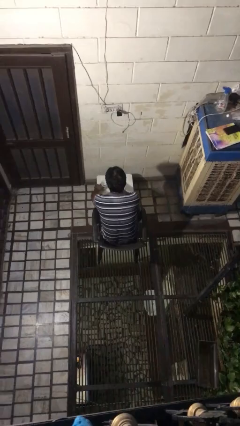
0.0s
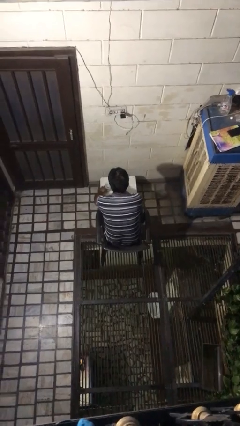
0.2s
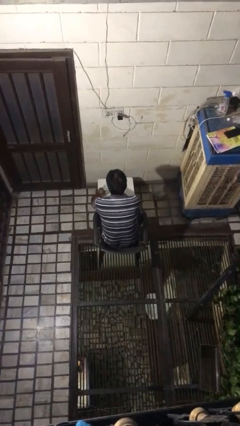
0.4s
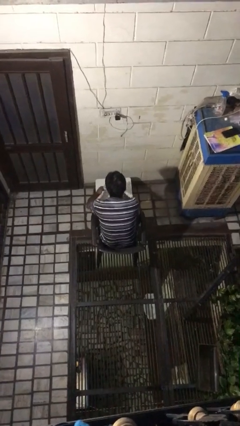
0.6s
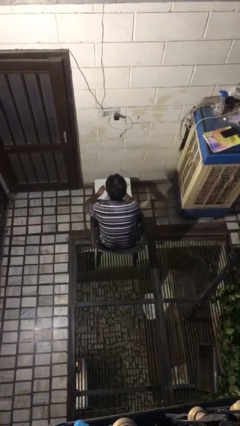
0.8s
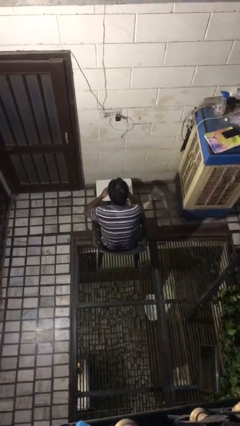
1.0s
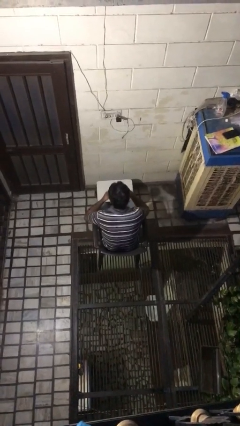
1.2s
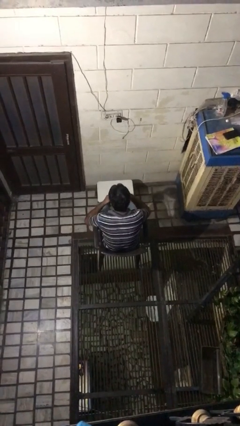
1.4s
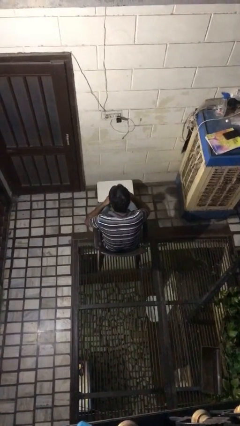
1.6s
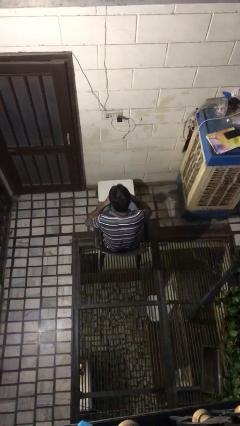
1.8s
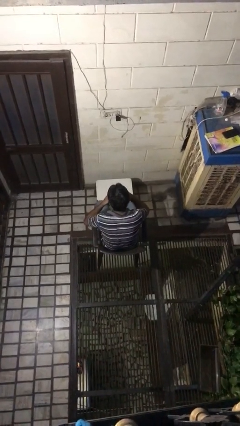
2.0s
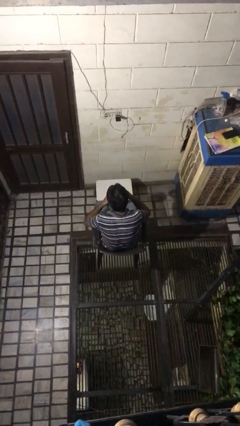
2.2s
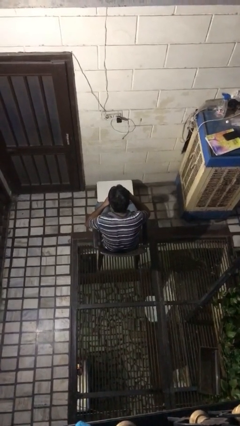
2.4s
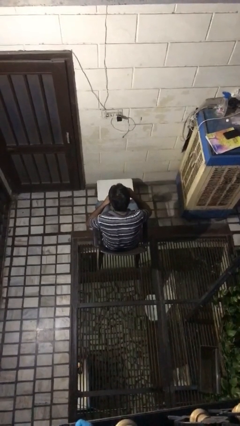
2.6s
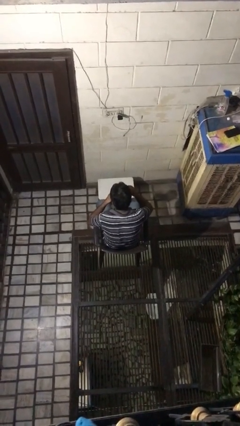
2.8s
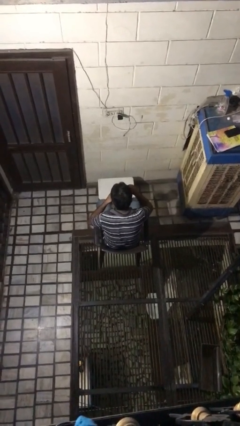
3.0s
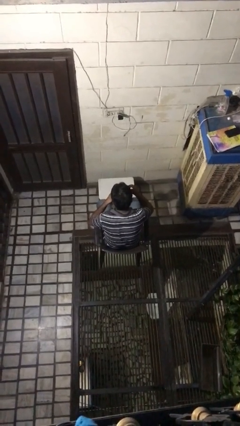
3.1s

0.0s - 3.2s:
person stirs mug

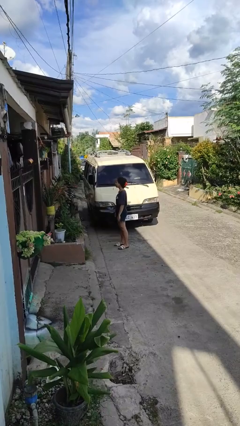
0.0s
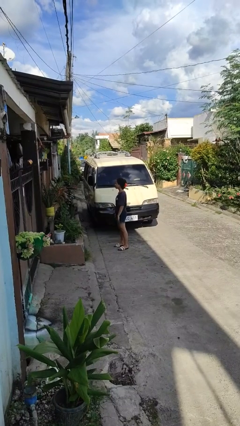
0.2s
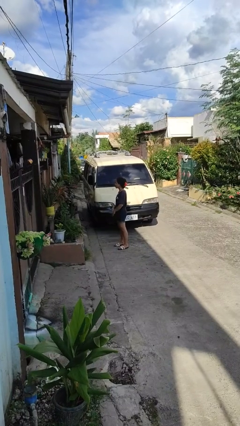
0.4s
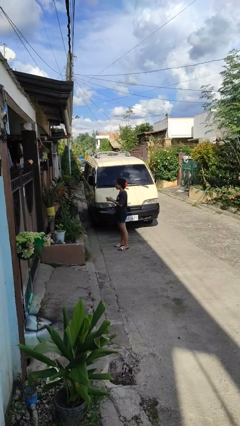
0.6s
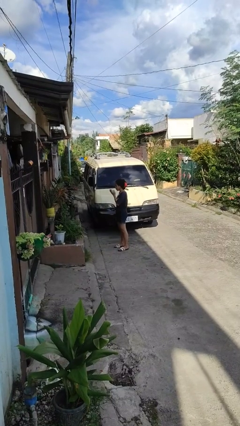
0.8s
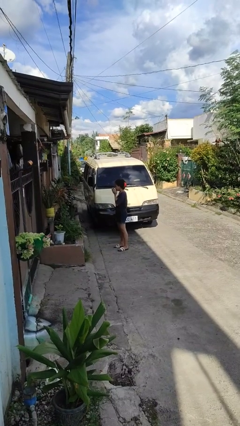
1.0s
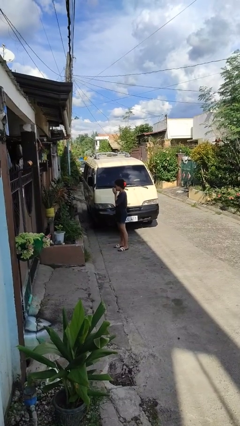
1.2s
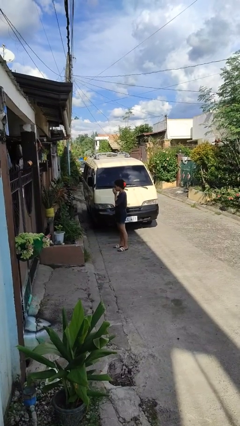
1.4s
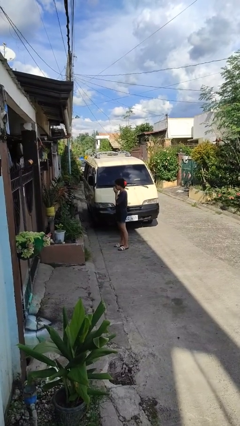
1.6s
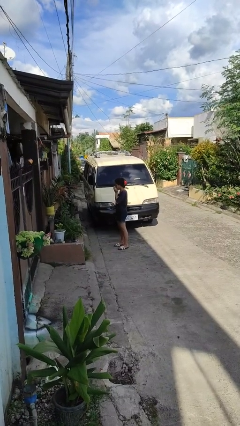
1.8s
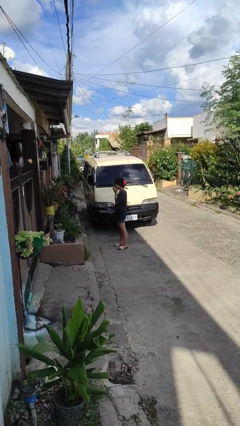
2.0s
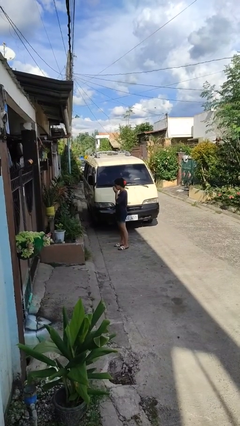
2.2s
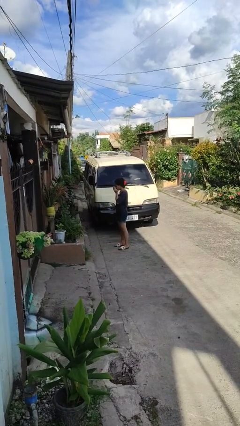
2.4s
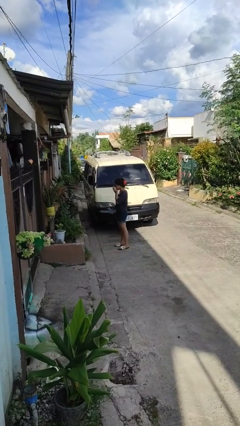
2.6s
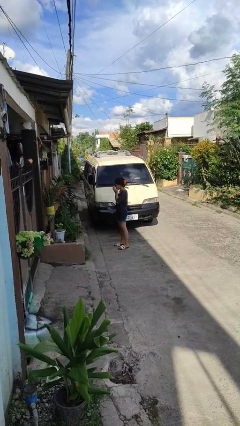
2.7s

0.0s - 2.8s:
person blows into hands

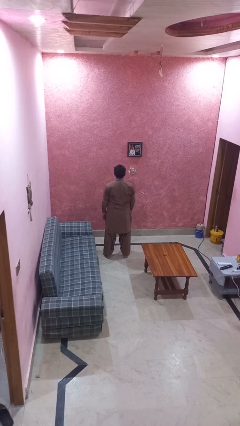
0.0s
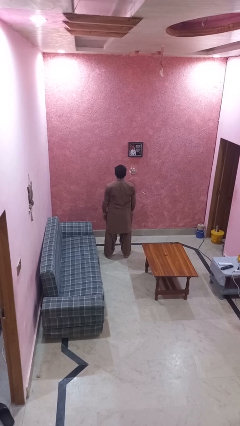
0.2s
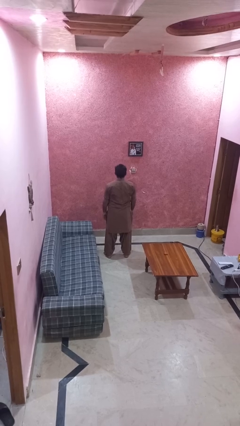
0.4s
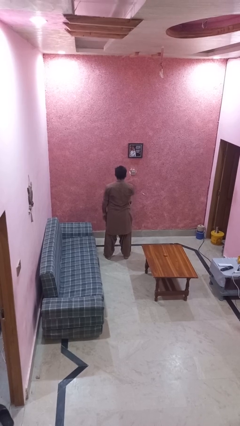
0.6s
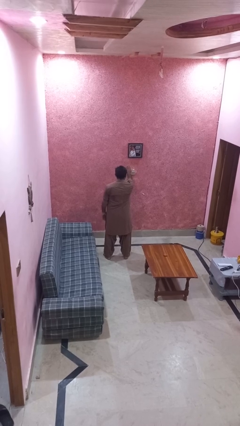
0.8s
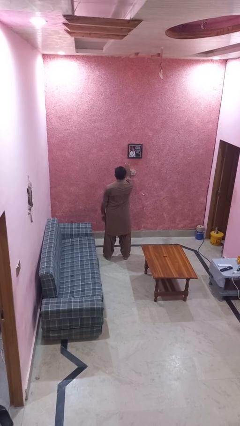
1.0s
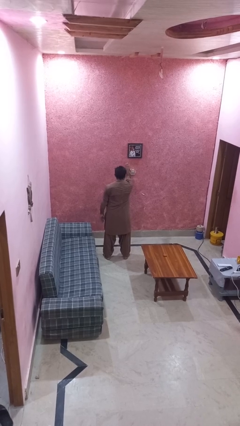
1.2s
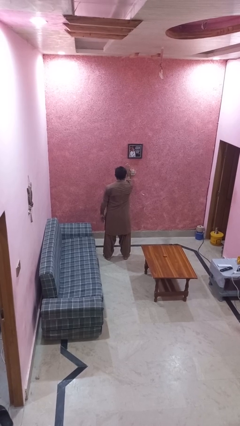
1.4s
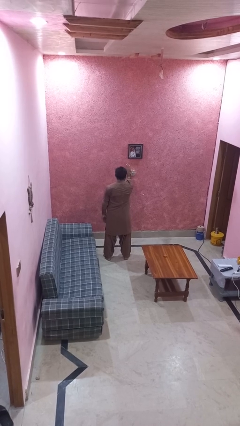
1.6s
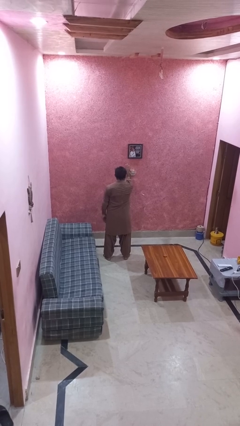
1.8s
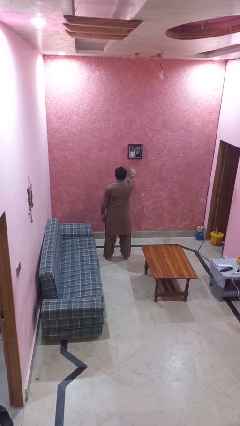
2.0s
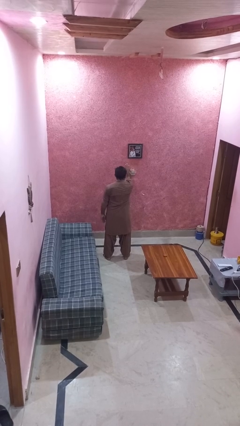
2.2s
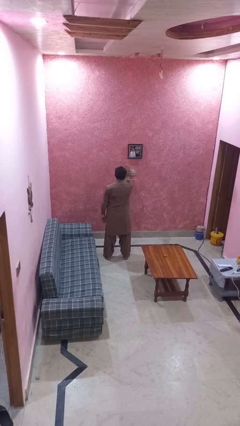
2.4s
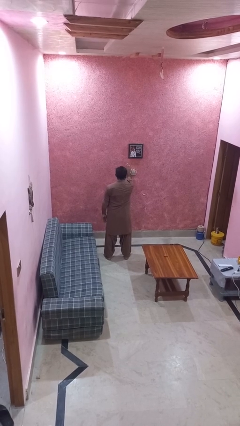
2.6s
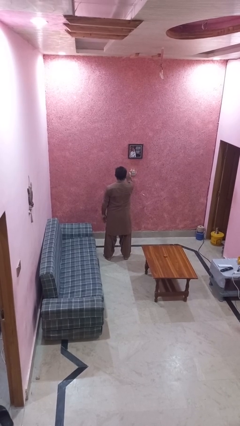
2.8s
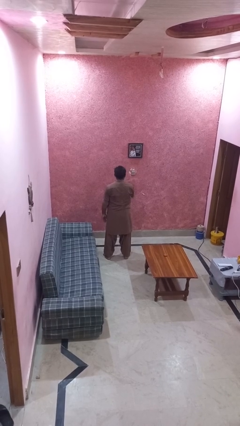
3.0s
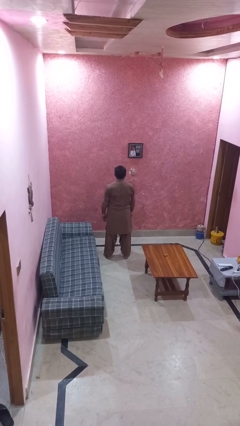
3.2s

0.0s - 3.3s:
person gestures stop

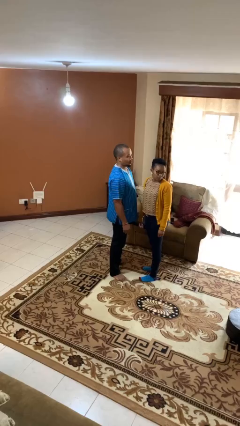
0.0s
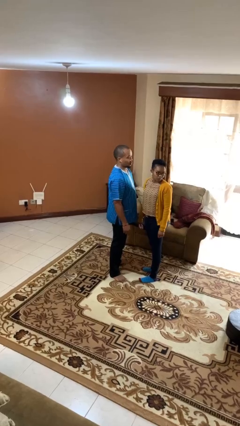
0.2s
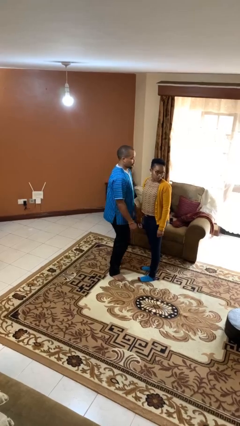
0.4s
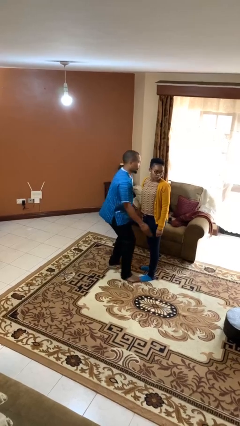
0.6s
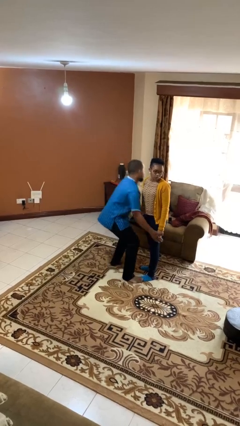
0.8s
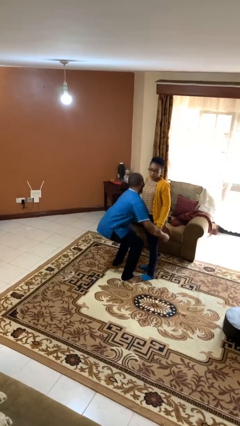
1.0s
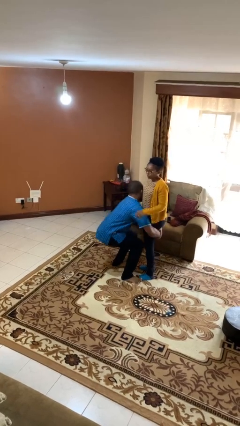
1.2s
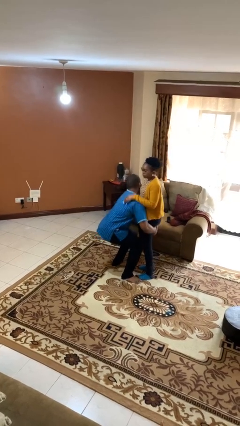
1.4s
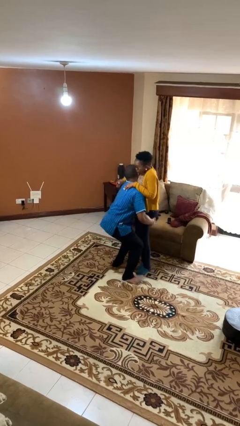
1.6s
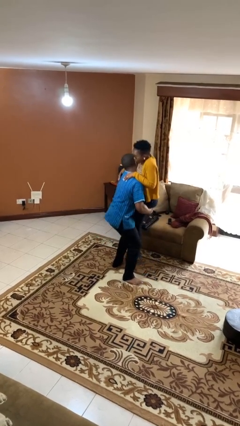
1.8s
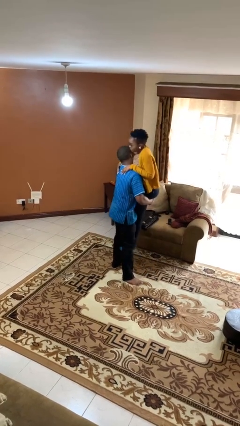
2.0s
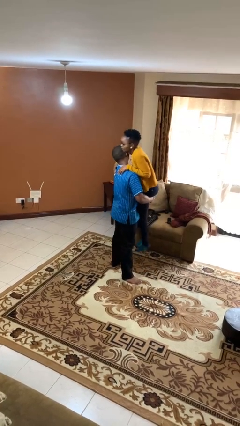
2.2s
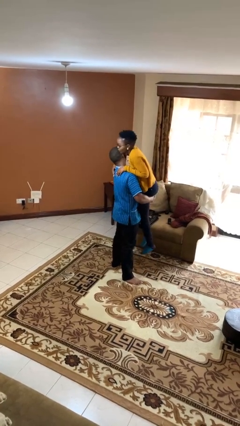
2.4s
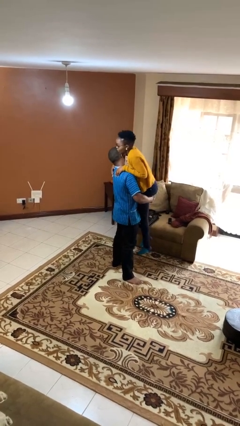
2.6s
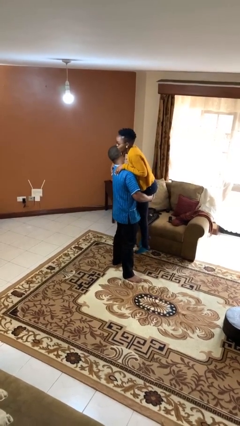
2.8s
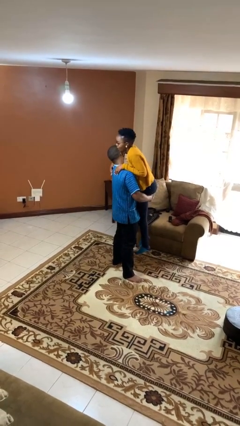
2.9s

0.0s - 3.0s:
person picks up person

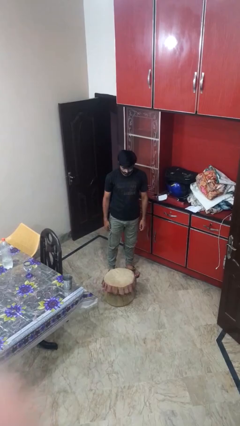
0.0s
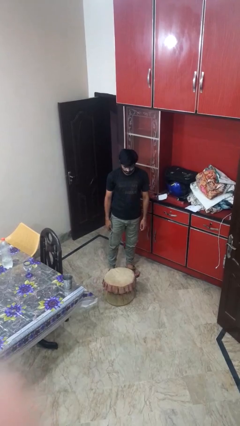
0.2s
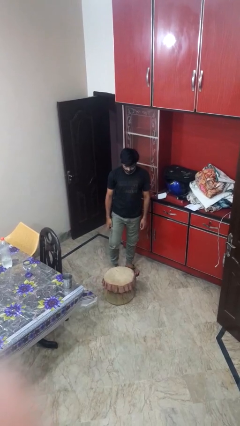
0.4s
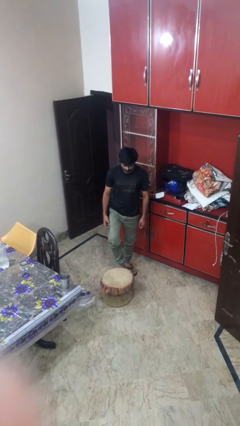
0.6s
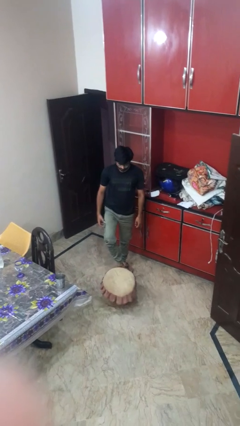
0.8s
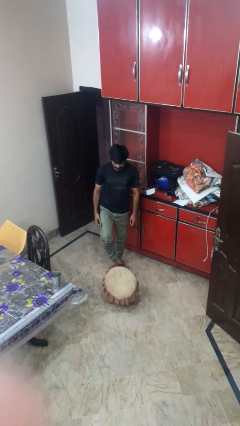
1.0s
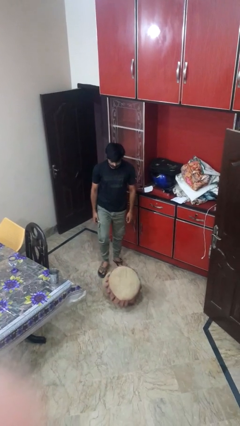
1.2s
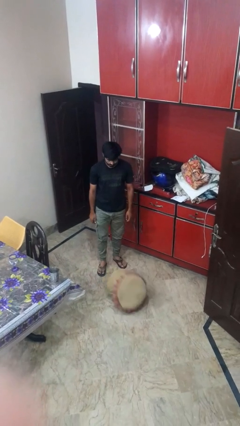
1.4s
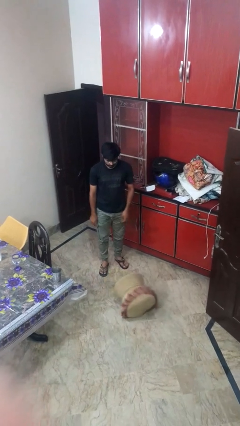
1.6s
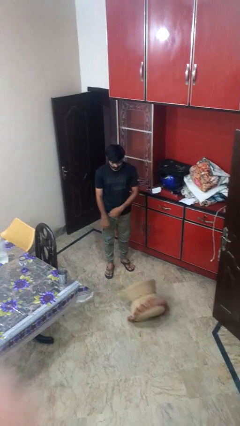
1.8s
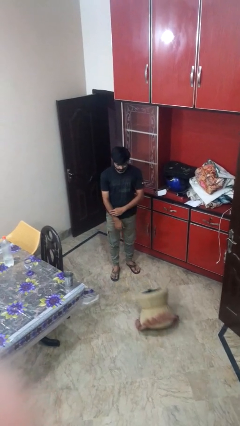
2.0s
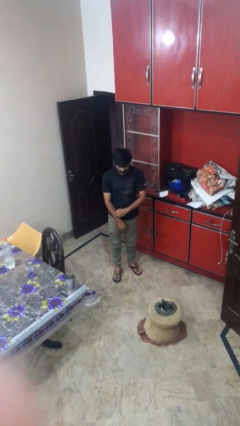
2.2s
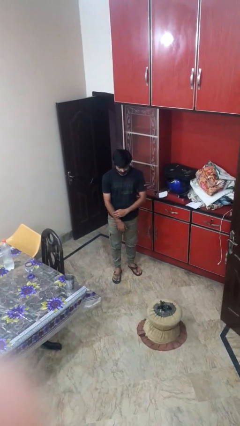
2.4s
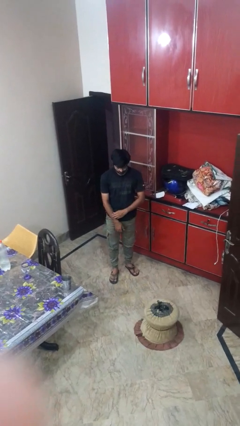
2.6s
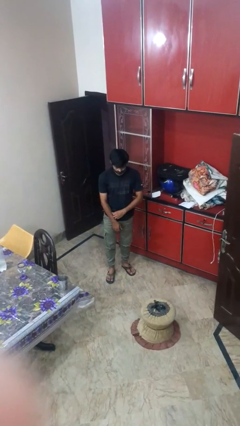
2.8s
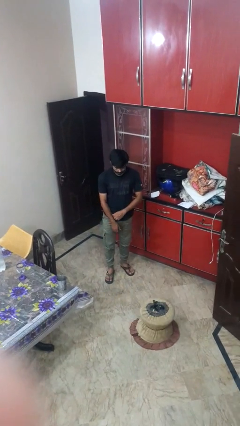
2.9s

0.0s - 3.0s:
person knocks over furniture

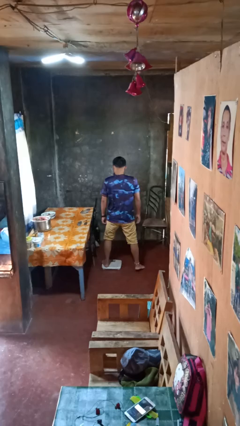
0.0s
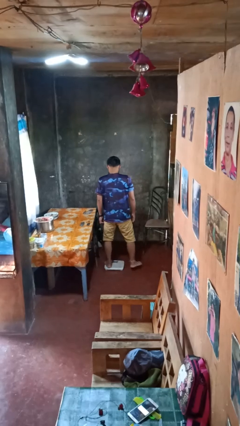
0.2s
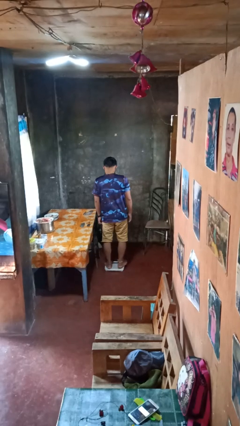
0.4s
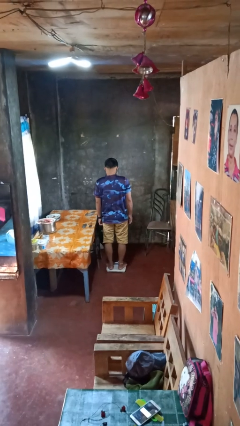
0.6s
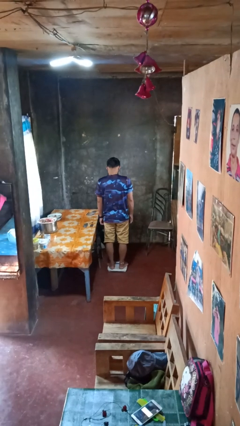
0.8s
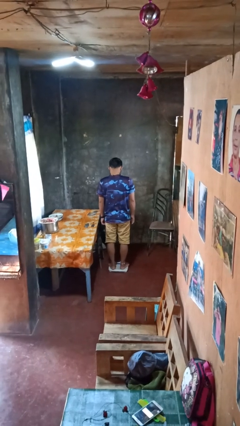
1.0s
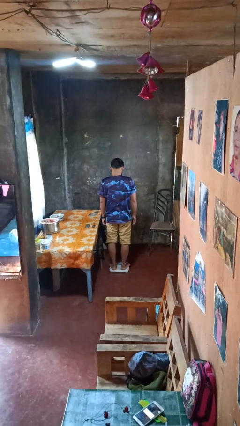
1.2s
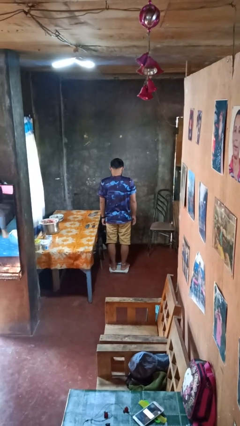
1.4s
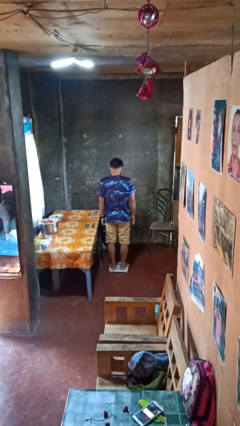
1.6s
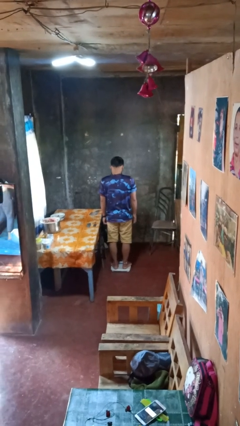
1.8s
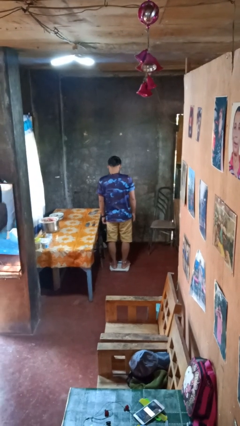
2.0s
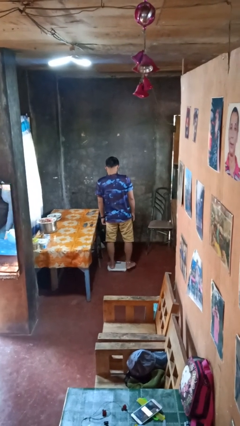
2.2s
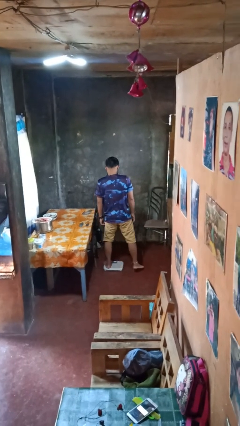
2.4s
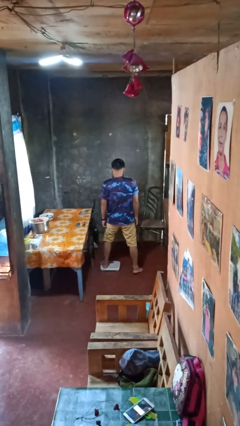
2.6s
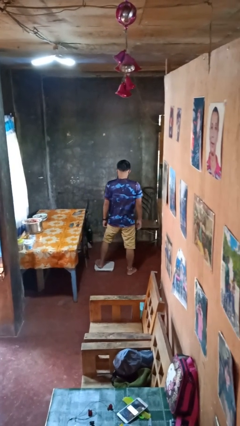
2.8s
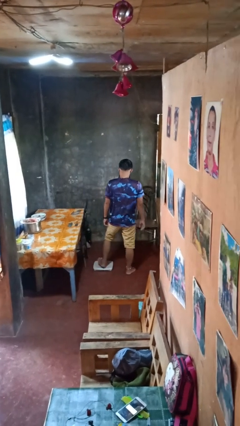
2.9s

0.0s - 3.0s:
person uses bodyweight scale
